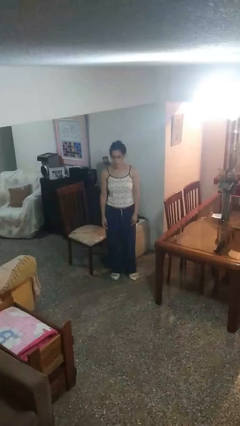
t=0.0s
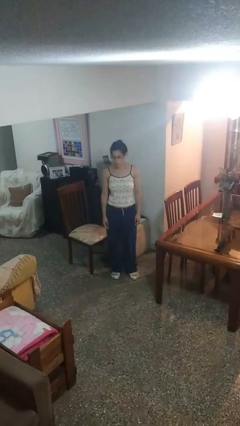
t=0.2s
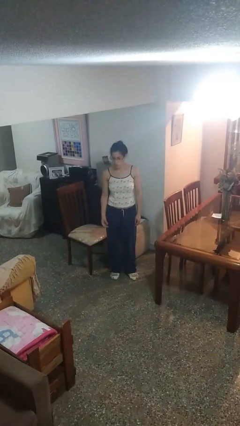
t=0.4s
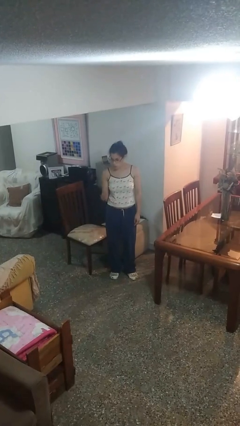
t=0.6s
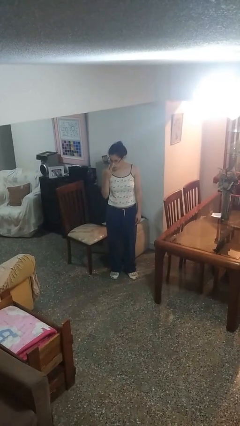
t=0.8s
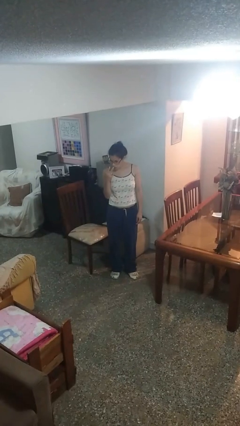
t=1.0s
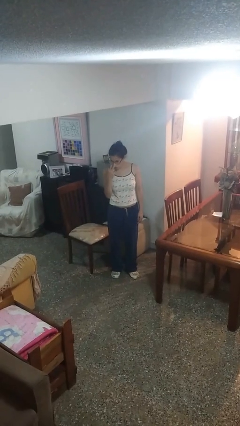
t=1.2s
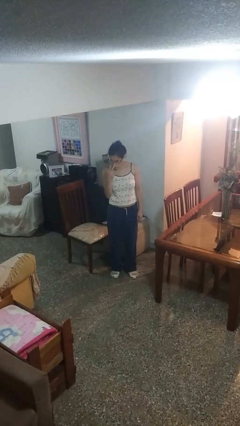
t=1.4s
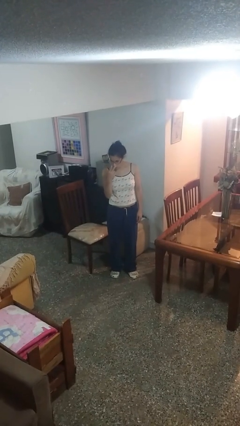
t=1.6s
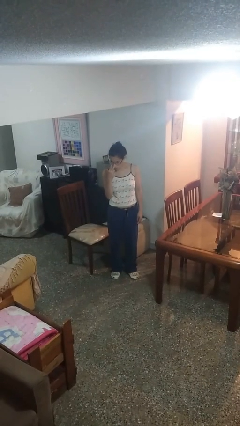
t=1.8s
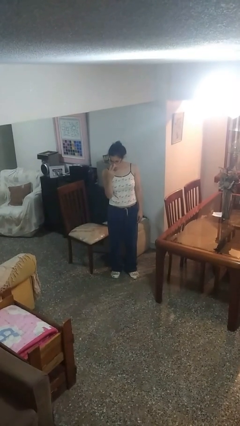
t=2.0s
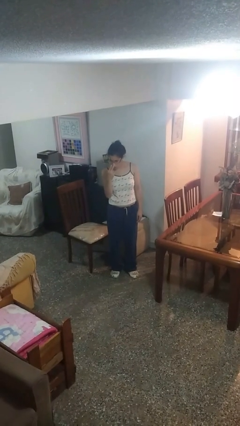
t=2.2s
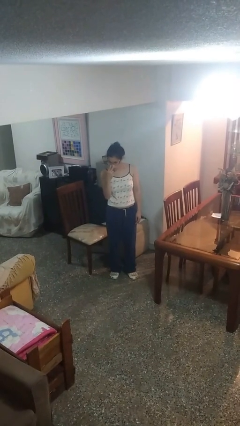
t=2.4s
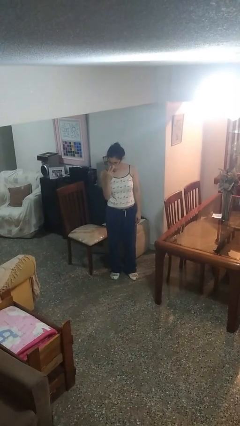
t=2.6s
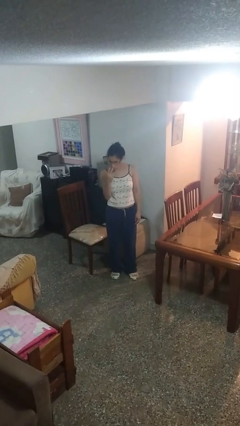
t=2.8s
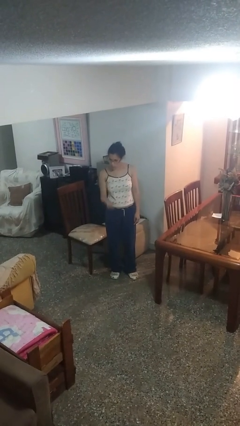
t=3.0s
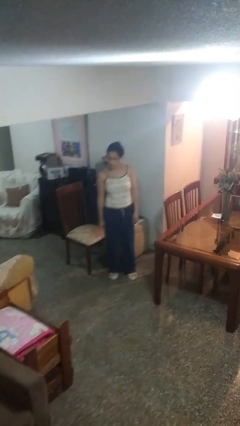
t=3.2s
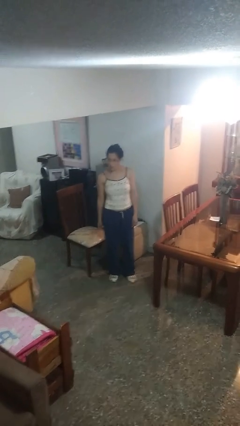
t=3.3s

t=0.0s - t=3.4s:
person gestures watch closely

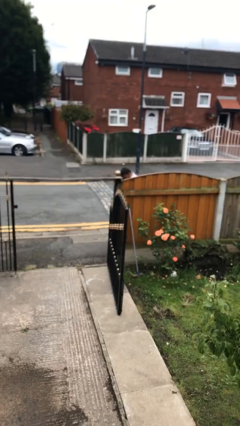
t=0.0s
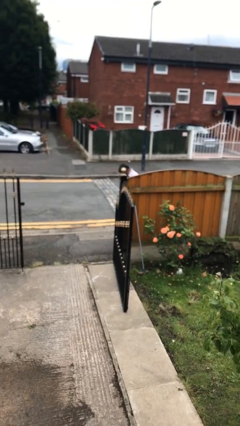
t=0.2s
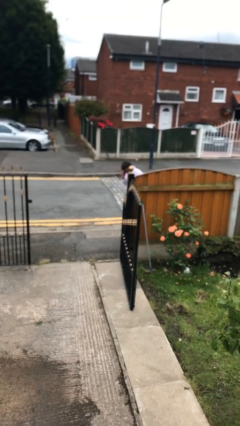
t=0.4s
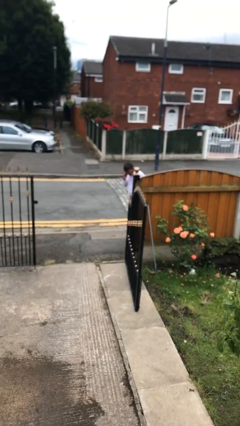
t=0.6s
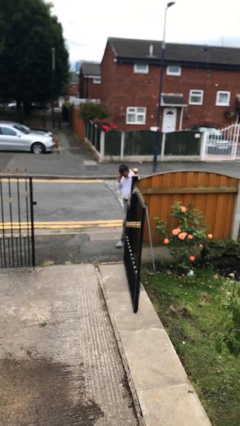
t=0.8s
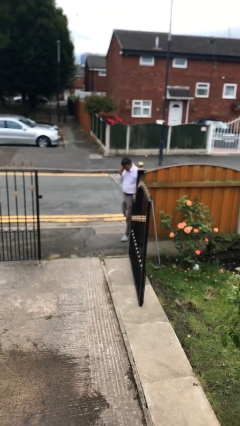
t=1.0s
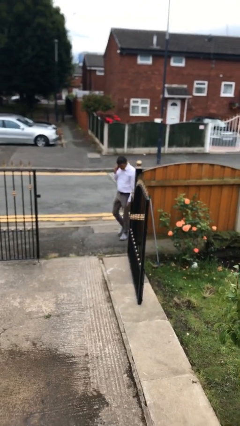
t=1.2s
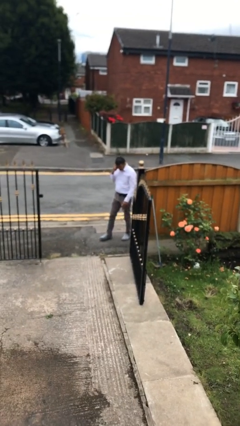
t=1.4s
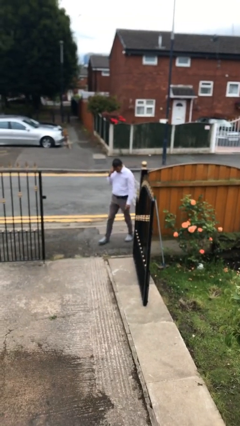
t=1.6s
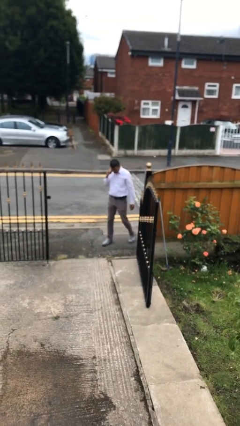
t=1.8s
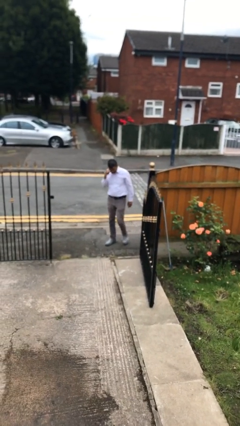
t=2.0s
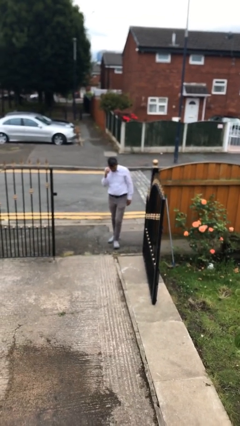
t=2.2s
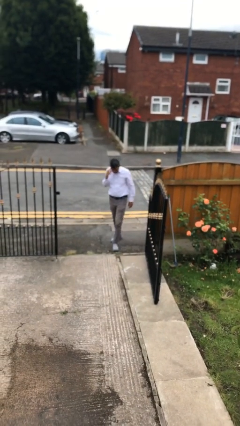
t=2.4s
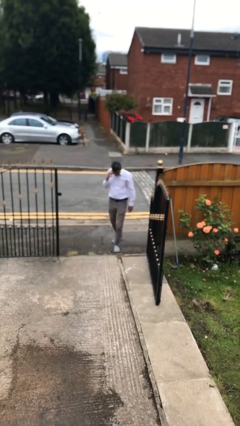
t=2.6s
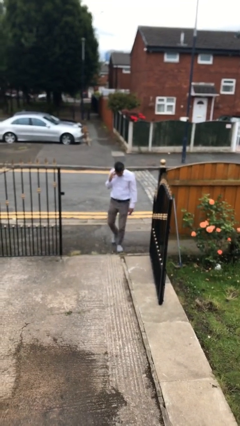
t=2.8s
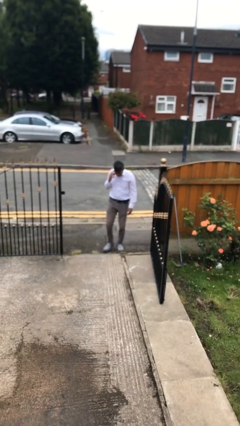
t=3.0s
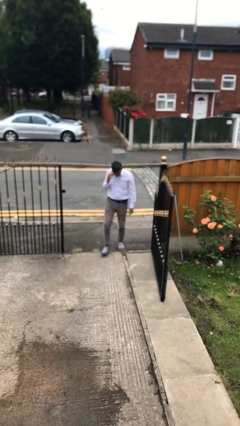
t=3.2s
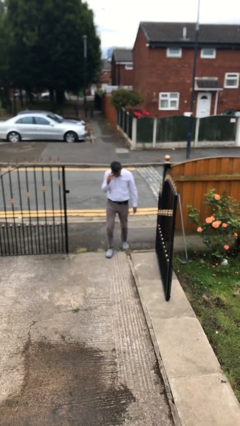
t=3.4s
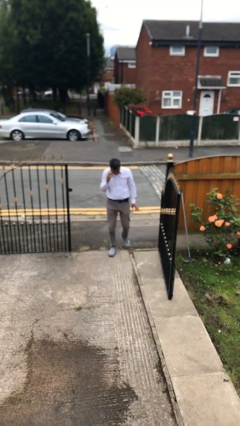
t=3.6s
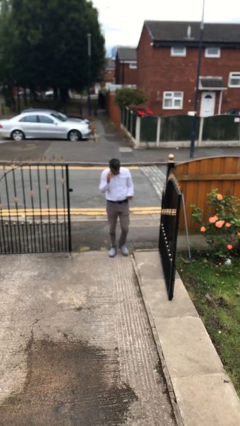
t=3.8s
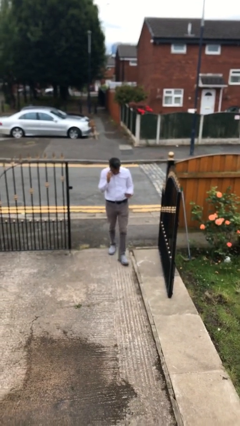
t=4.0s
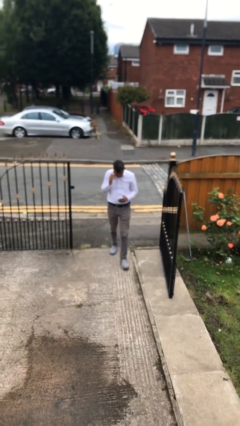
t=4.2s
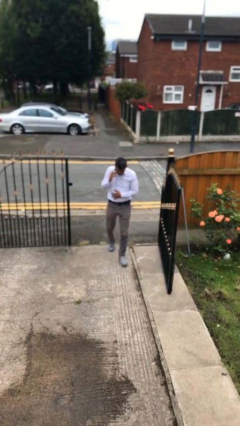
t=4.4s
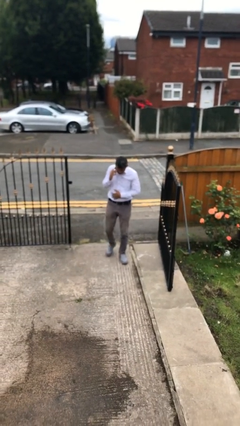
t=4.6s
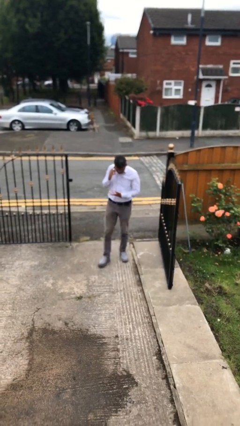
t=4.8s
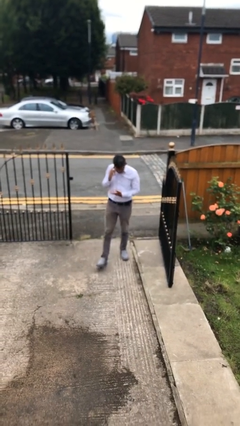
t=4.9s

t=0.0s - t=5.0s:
person enters scene through structure

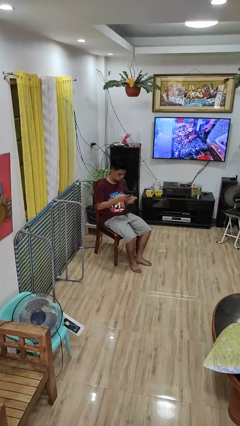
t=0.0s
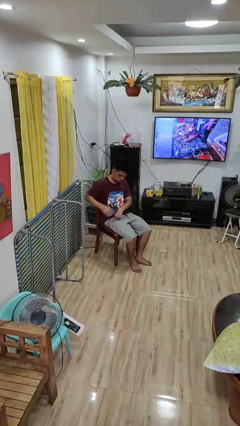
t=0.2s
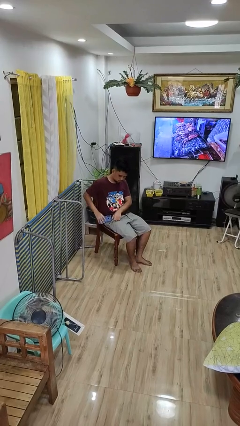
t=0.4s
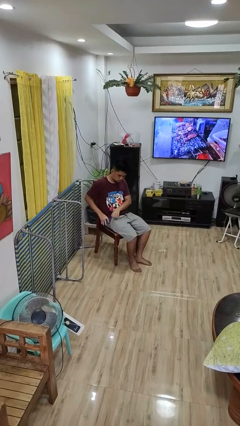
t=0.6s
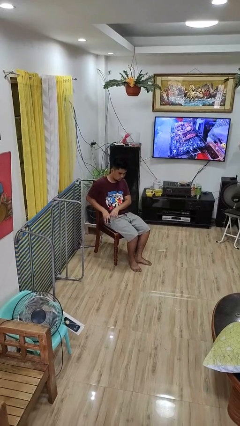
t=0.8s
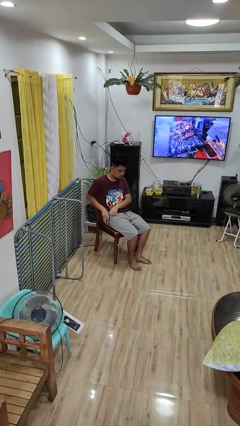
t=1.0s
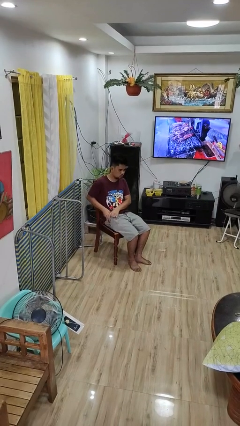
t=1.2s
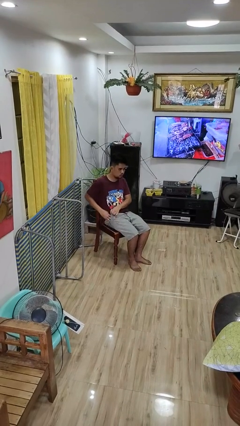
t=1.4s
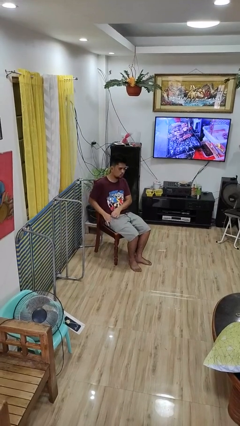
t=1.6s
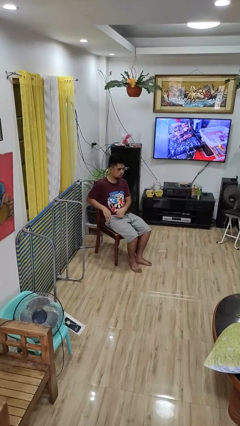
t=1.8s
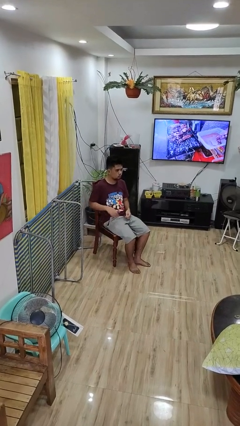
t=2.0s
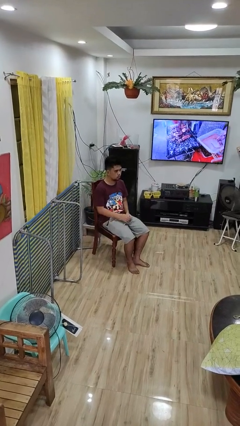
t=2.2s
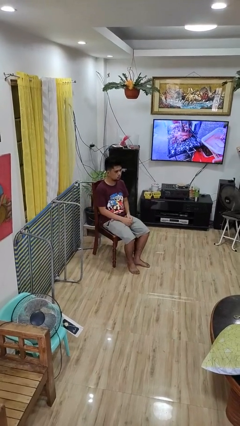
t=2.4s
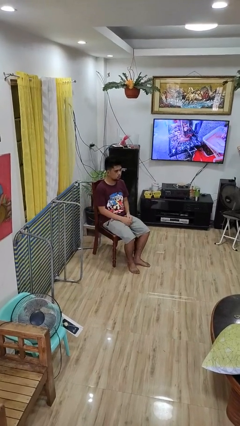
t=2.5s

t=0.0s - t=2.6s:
person puts phone into pocket

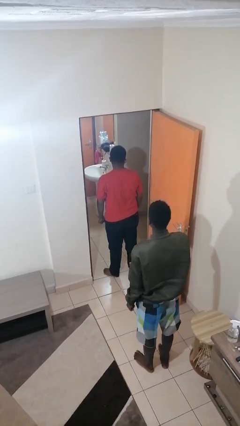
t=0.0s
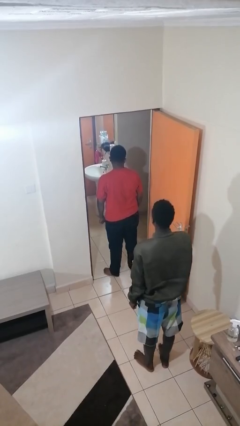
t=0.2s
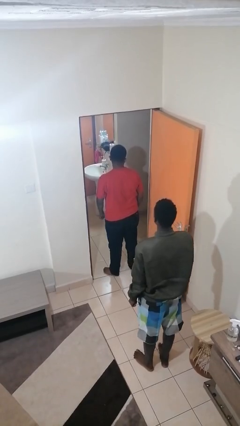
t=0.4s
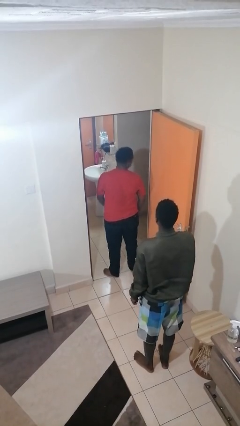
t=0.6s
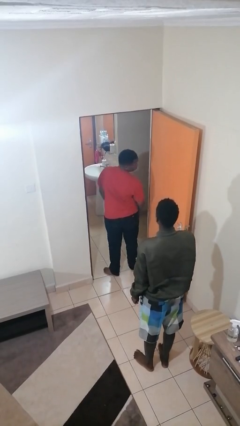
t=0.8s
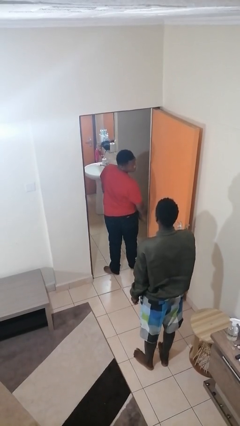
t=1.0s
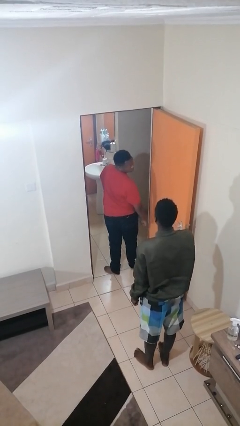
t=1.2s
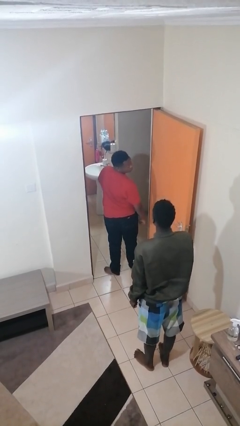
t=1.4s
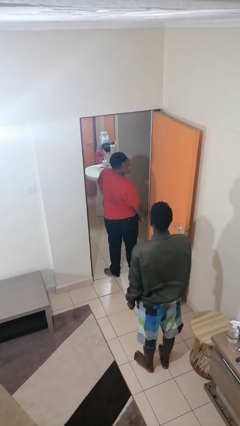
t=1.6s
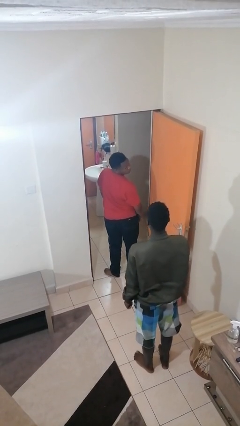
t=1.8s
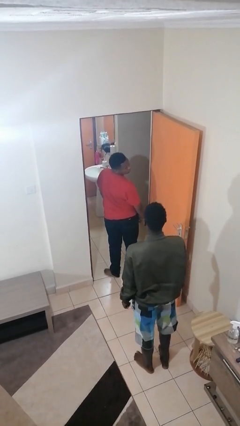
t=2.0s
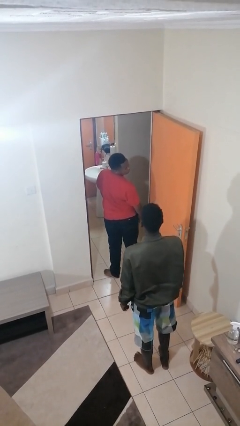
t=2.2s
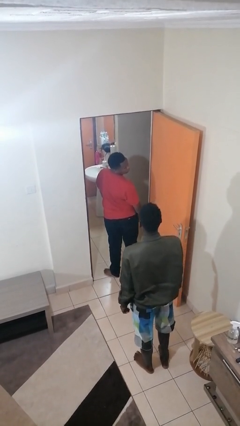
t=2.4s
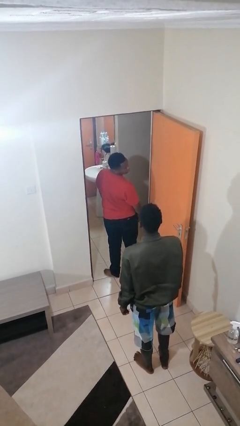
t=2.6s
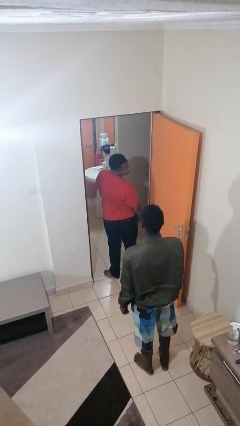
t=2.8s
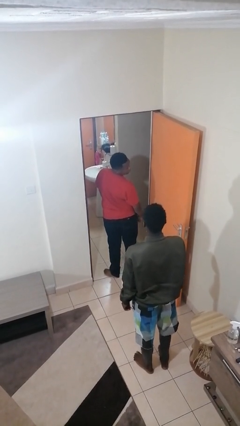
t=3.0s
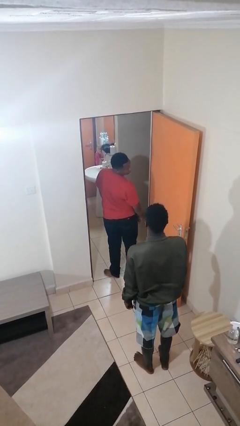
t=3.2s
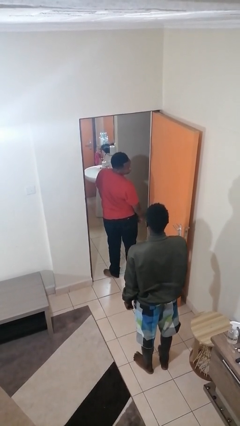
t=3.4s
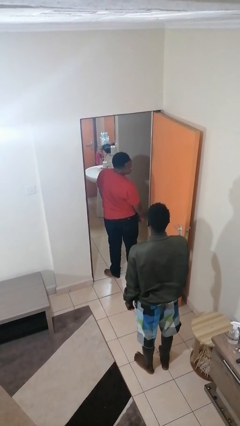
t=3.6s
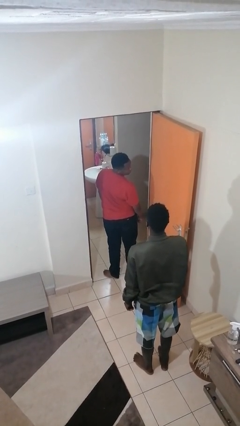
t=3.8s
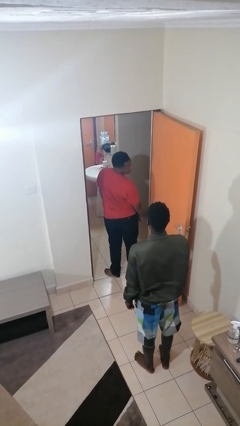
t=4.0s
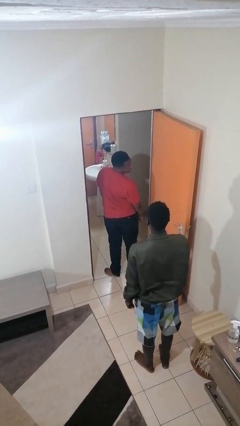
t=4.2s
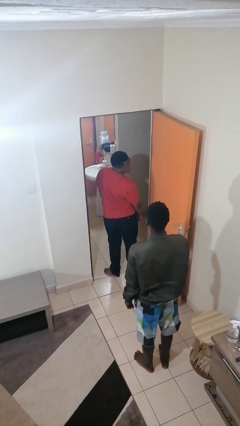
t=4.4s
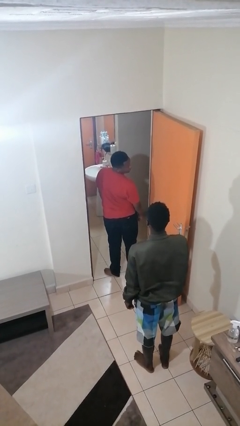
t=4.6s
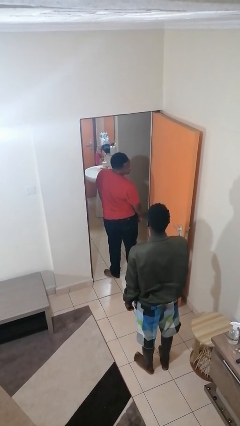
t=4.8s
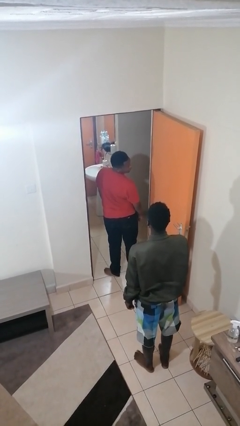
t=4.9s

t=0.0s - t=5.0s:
person looks over shoulder

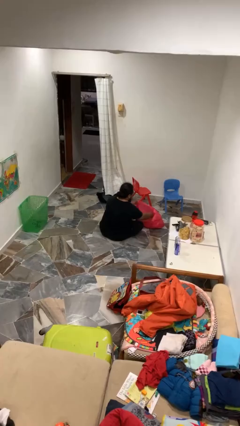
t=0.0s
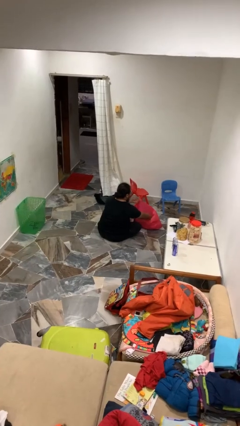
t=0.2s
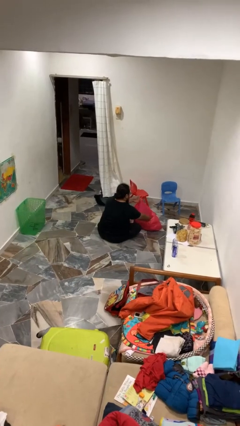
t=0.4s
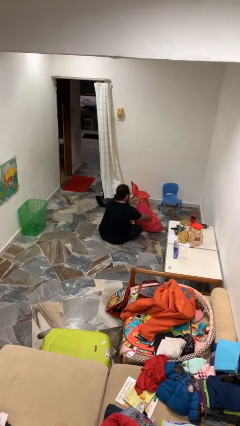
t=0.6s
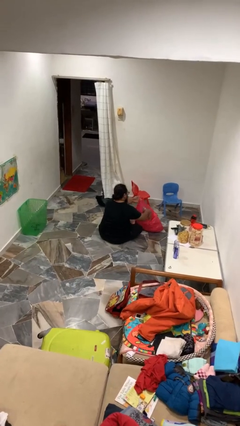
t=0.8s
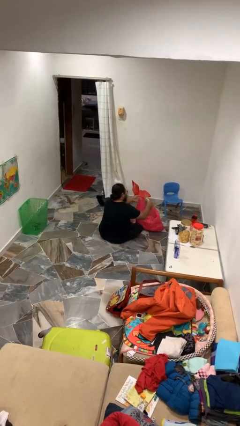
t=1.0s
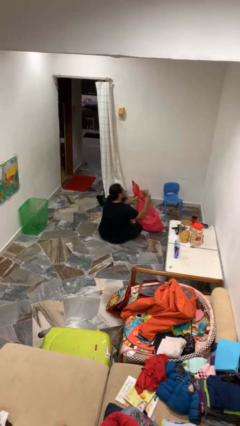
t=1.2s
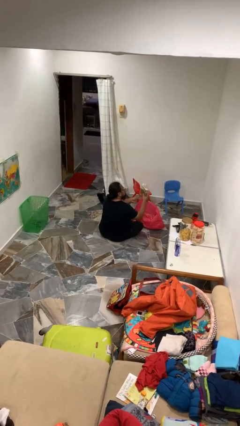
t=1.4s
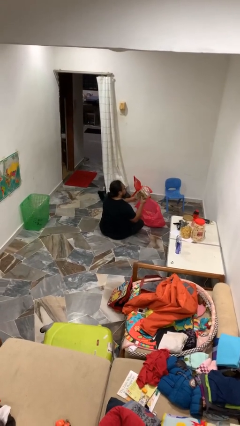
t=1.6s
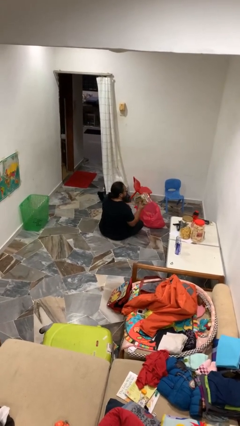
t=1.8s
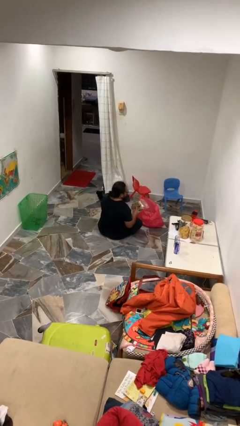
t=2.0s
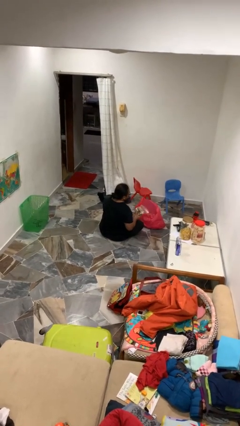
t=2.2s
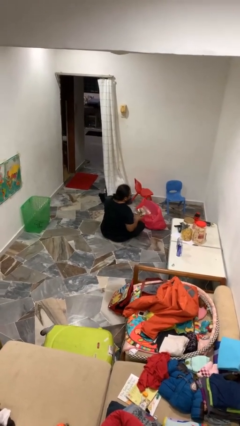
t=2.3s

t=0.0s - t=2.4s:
person takes object from bag
